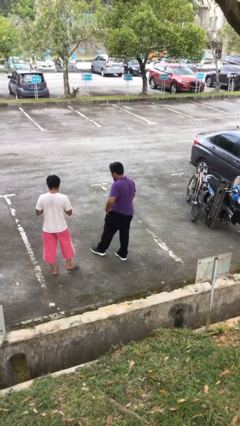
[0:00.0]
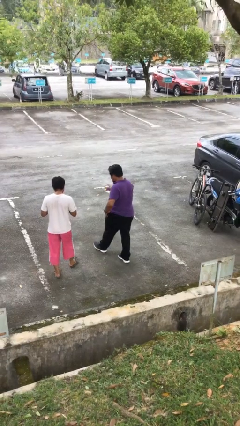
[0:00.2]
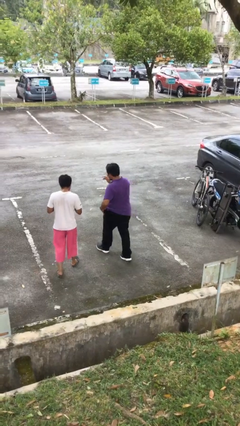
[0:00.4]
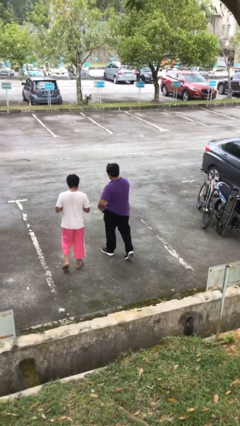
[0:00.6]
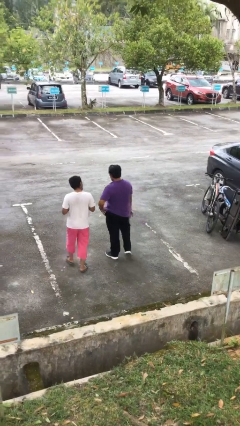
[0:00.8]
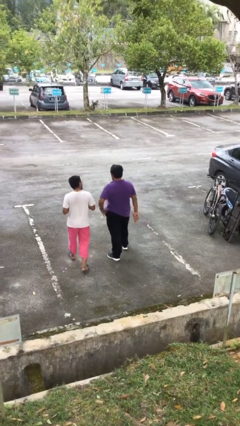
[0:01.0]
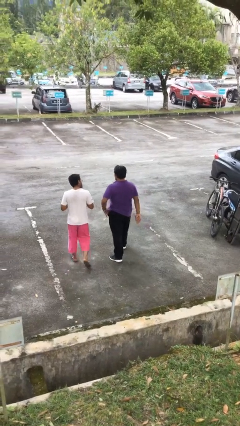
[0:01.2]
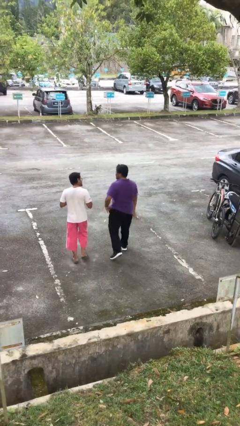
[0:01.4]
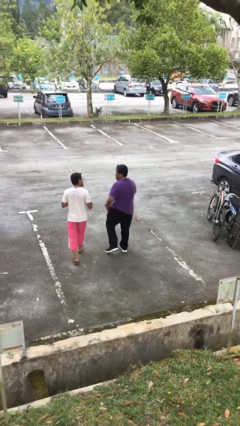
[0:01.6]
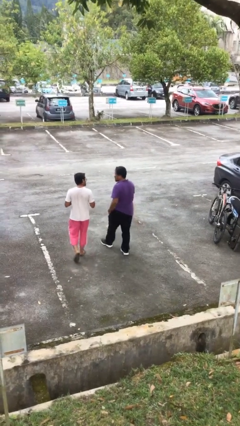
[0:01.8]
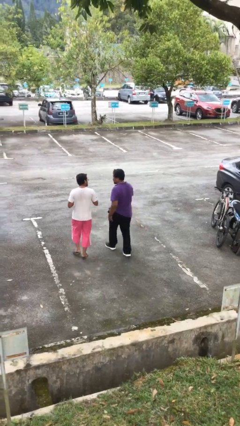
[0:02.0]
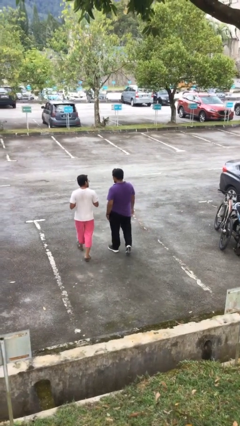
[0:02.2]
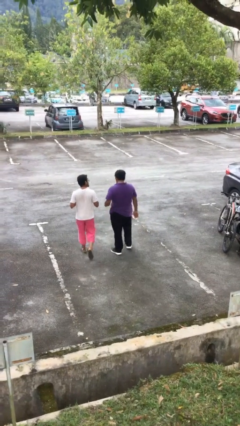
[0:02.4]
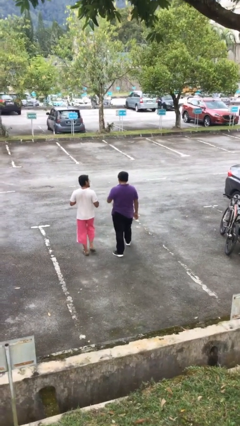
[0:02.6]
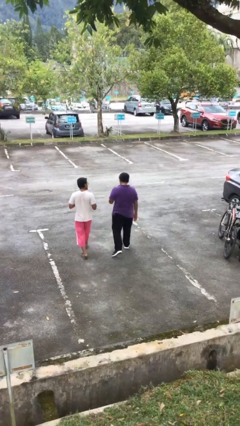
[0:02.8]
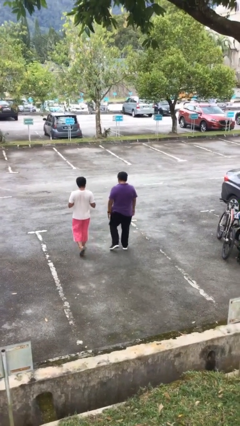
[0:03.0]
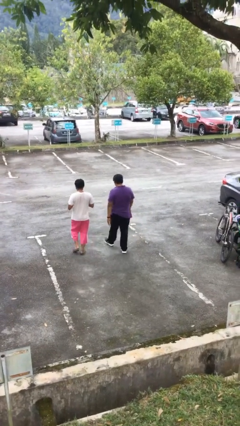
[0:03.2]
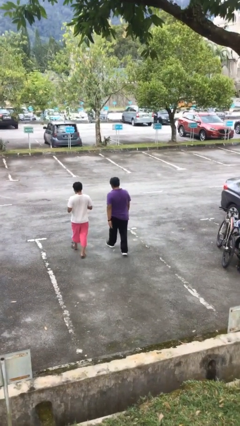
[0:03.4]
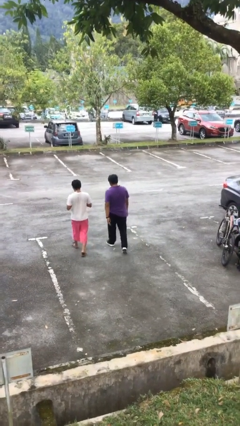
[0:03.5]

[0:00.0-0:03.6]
person talks to person

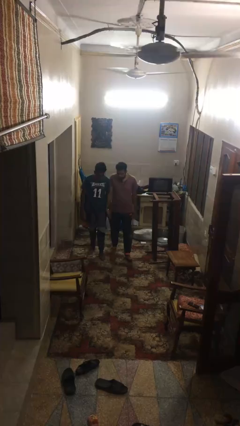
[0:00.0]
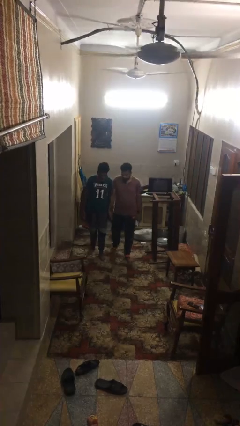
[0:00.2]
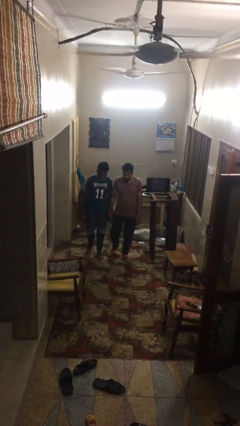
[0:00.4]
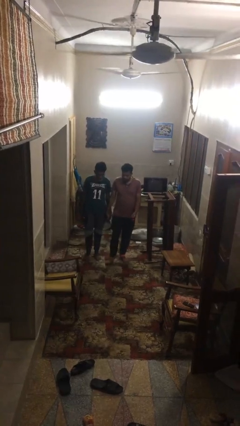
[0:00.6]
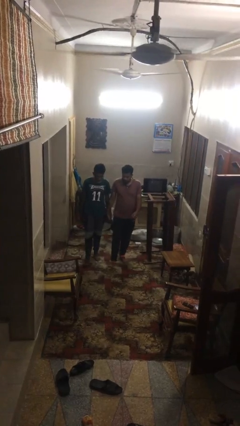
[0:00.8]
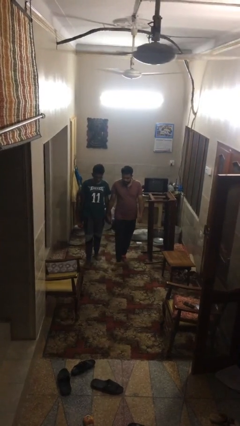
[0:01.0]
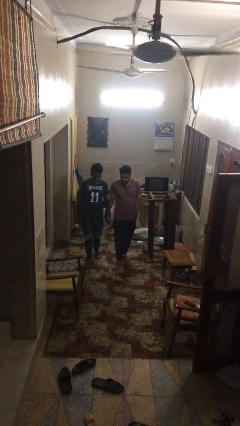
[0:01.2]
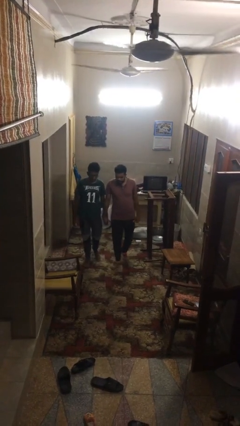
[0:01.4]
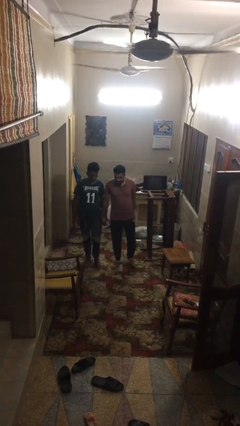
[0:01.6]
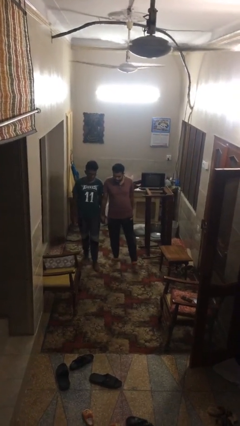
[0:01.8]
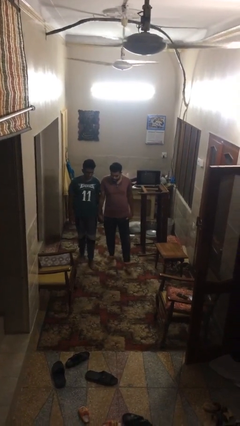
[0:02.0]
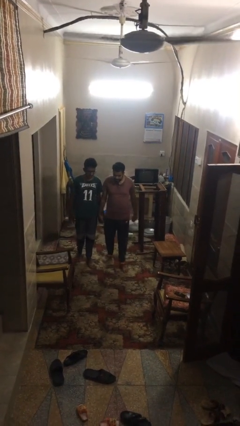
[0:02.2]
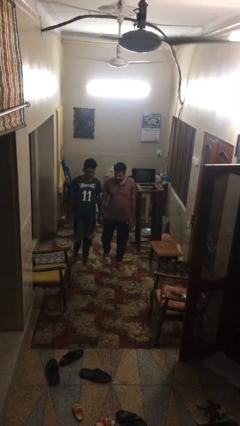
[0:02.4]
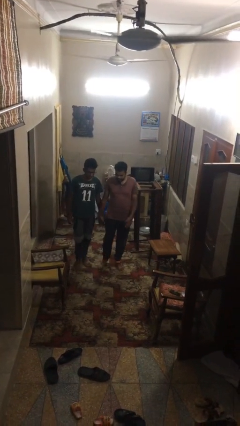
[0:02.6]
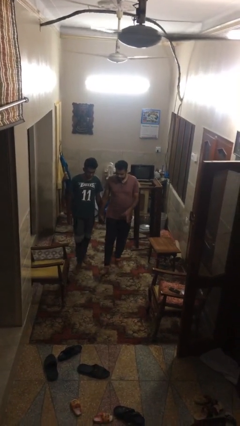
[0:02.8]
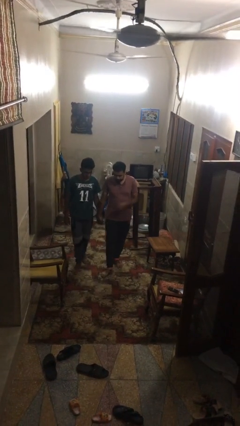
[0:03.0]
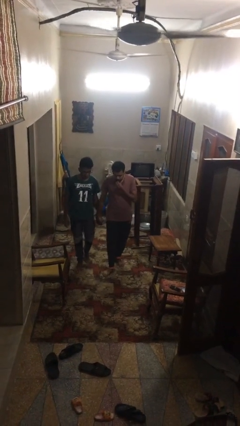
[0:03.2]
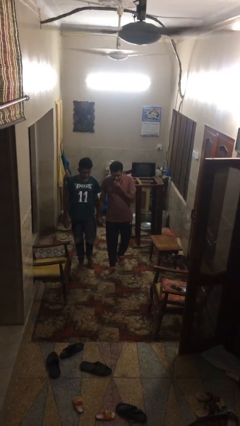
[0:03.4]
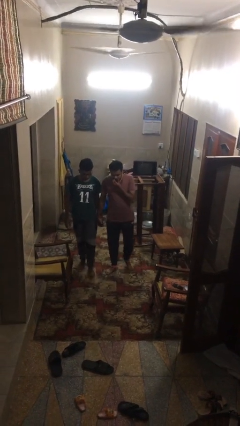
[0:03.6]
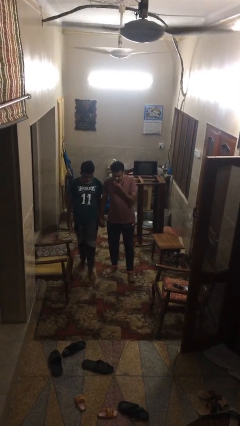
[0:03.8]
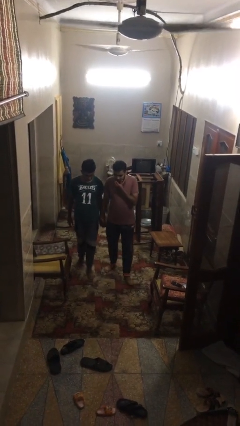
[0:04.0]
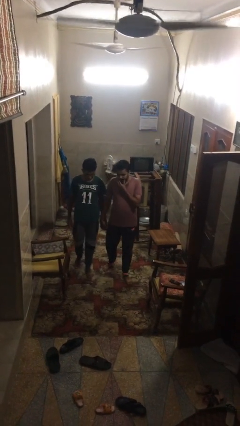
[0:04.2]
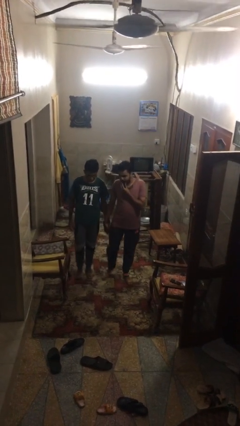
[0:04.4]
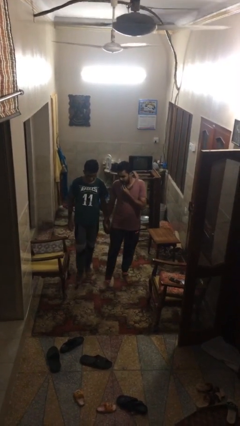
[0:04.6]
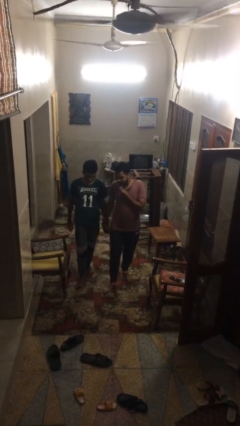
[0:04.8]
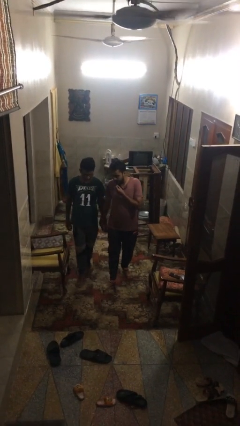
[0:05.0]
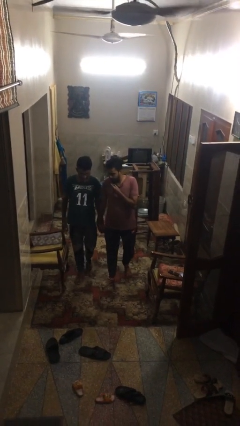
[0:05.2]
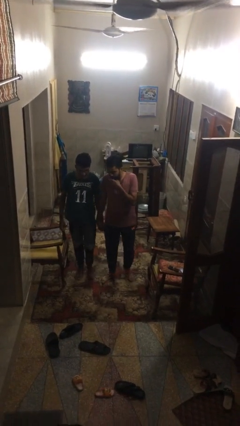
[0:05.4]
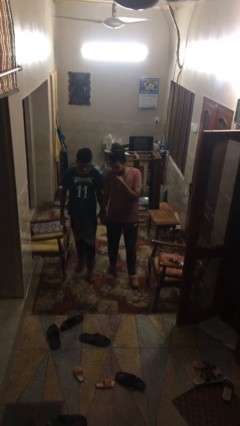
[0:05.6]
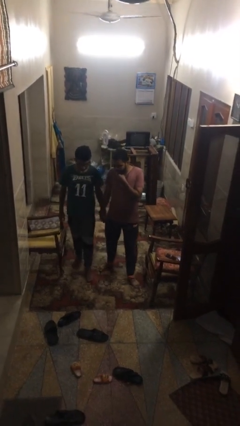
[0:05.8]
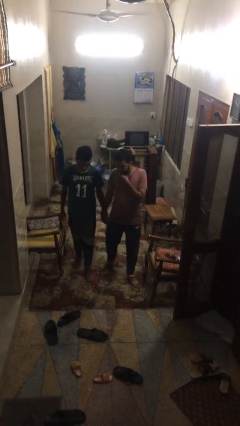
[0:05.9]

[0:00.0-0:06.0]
person holds hand

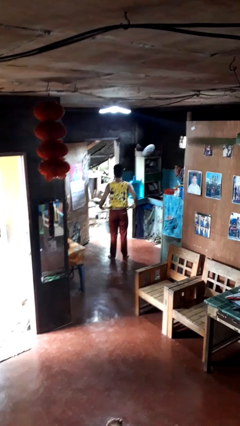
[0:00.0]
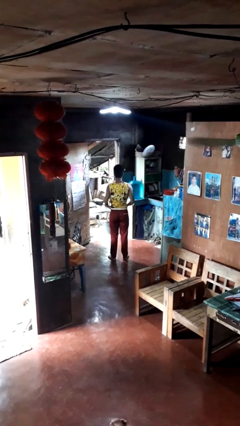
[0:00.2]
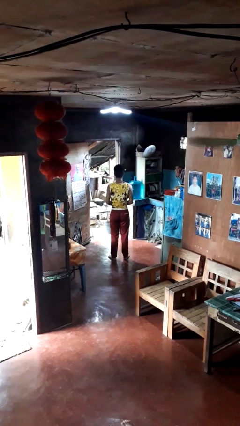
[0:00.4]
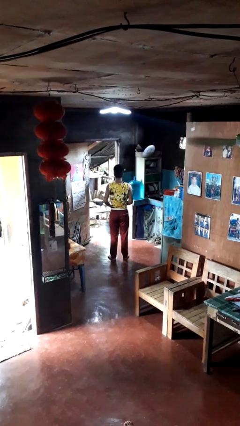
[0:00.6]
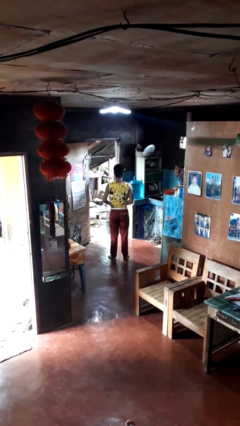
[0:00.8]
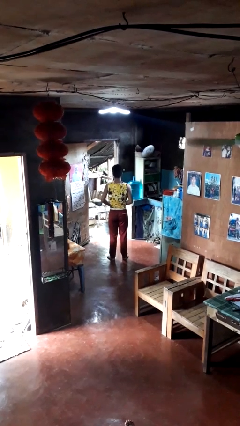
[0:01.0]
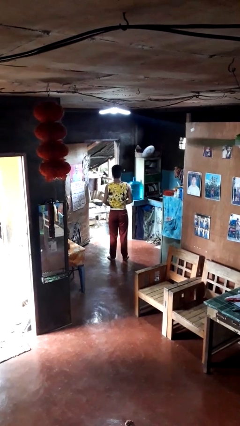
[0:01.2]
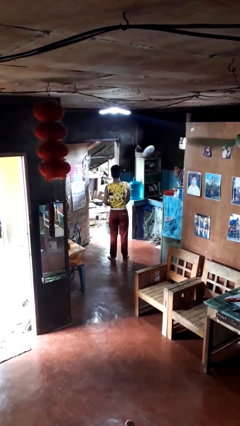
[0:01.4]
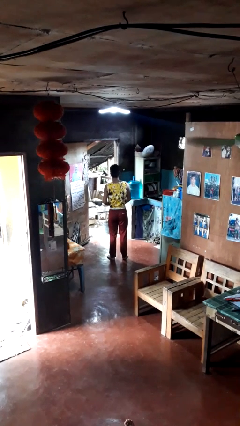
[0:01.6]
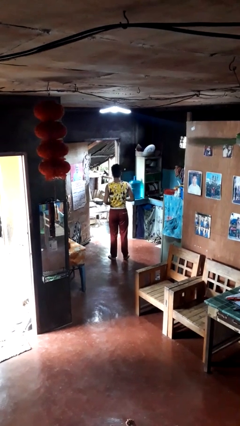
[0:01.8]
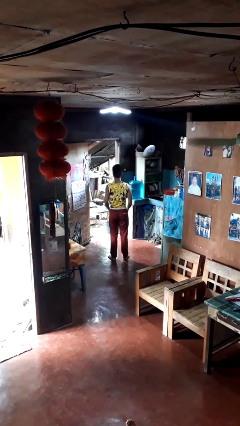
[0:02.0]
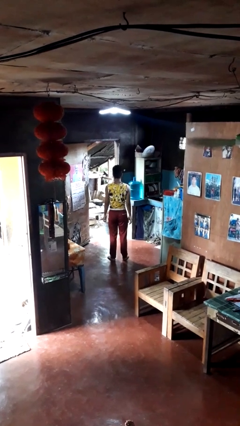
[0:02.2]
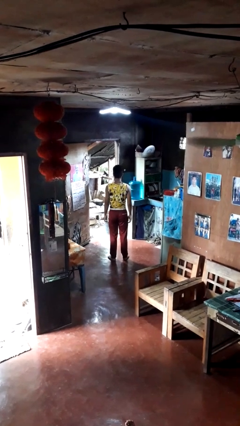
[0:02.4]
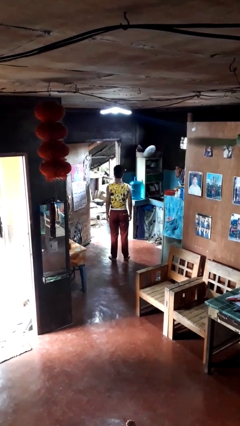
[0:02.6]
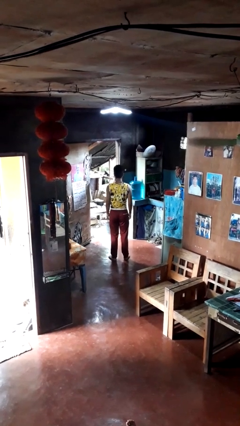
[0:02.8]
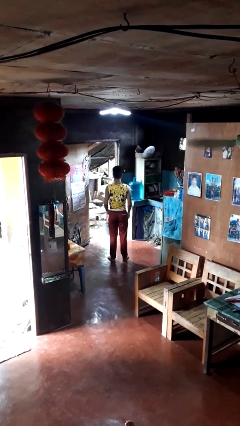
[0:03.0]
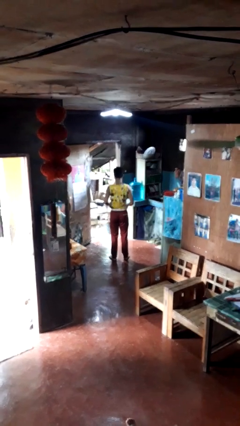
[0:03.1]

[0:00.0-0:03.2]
person tucks in shirt

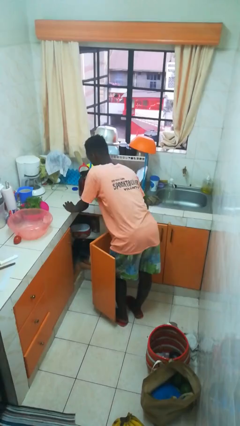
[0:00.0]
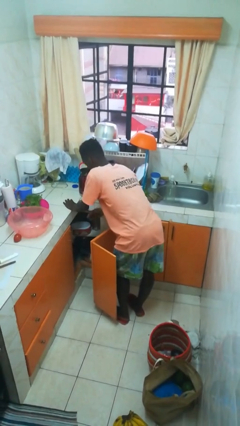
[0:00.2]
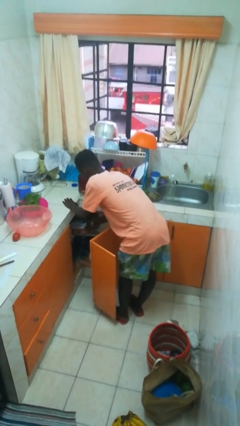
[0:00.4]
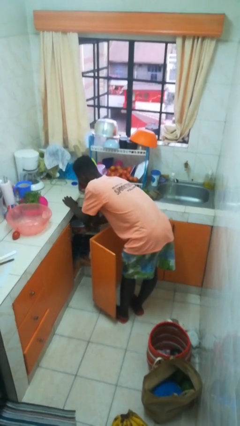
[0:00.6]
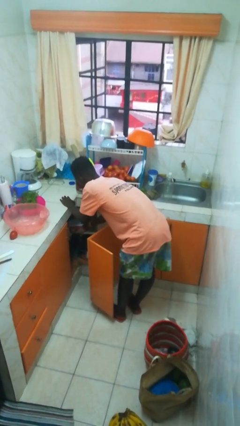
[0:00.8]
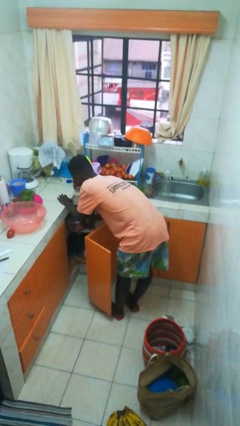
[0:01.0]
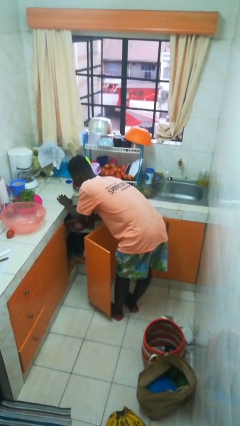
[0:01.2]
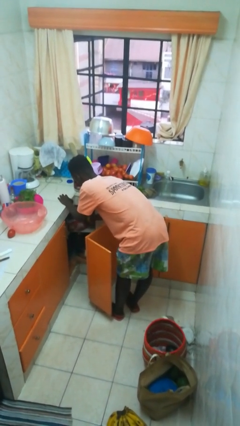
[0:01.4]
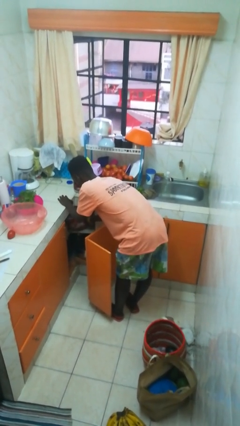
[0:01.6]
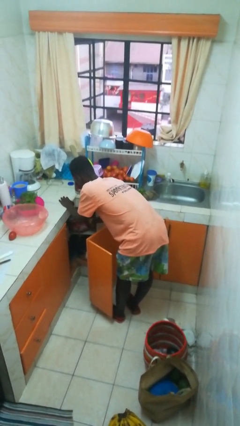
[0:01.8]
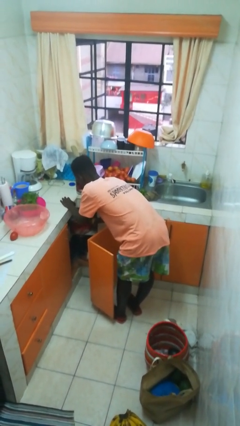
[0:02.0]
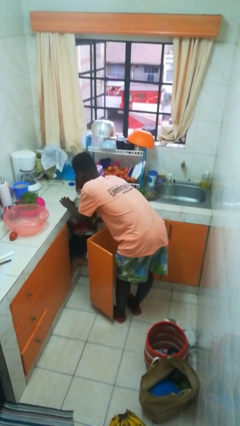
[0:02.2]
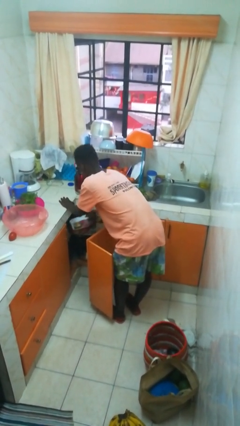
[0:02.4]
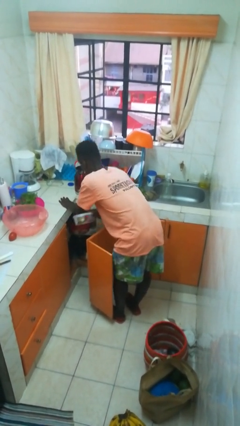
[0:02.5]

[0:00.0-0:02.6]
person takes object from cabinet

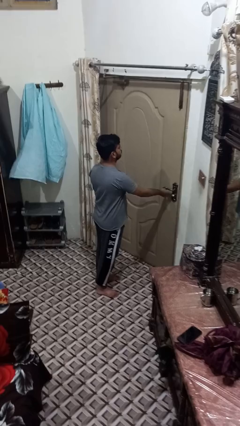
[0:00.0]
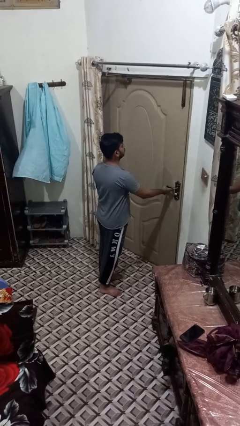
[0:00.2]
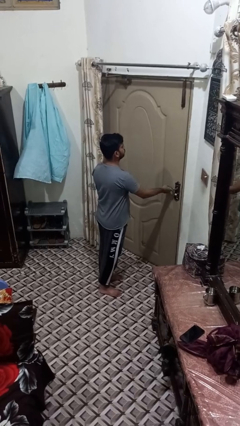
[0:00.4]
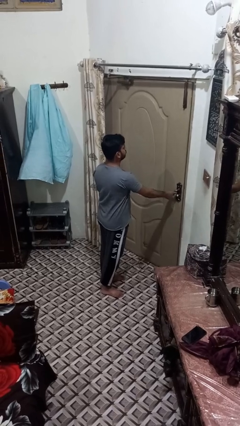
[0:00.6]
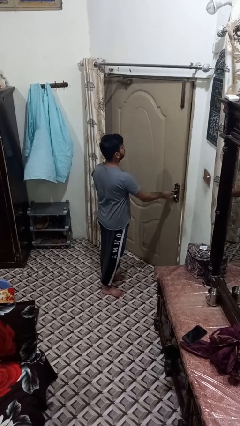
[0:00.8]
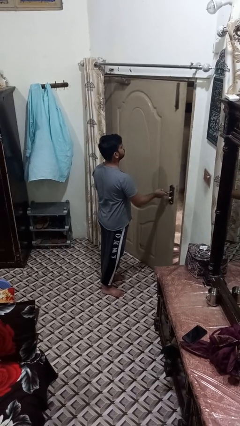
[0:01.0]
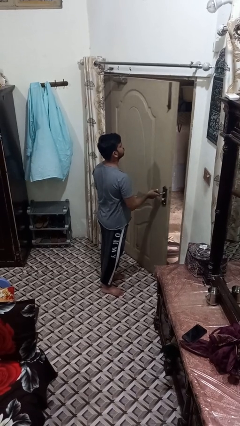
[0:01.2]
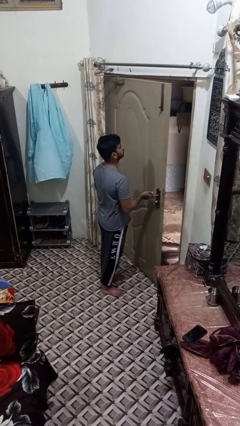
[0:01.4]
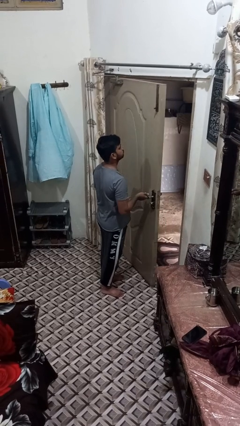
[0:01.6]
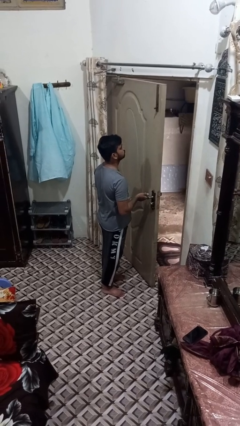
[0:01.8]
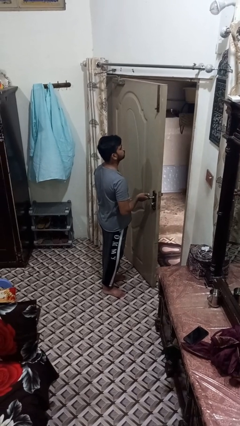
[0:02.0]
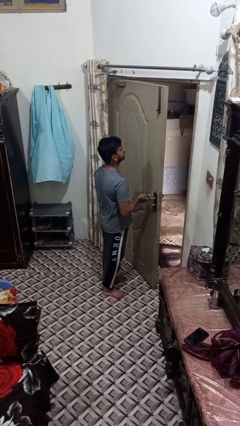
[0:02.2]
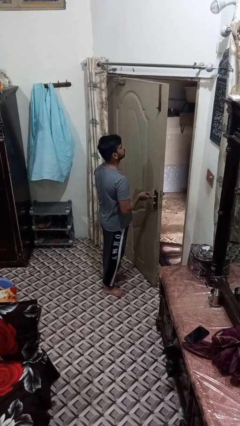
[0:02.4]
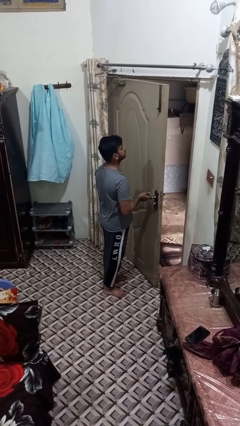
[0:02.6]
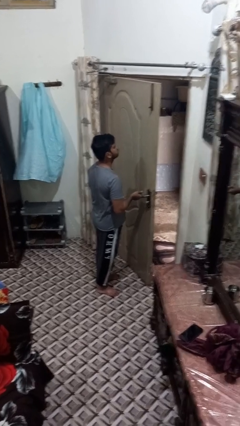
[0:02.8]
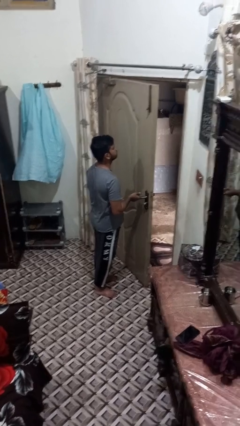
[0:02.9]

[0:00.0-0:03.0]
person opens facility door
